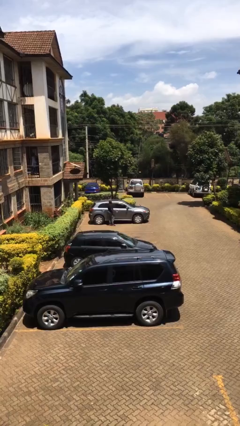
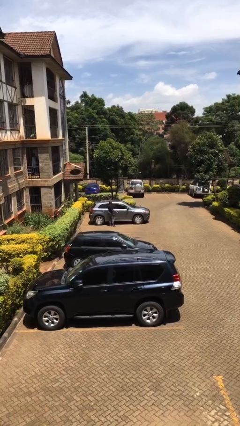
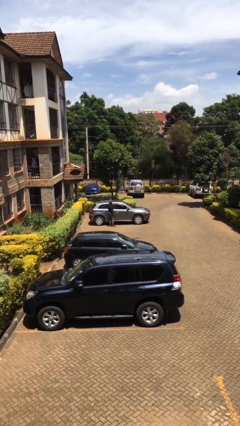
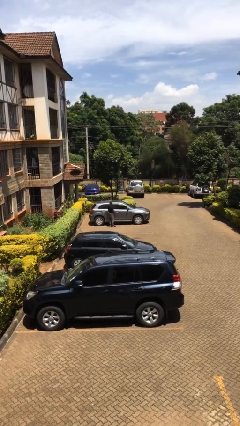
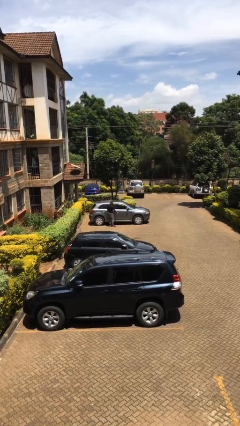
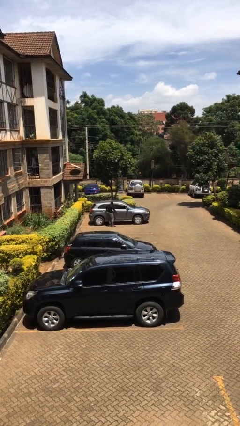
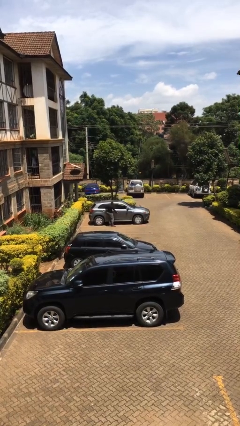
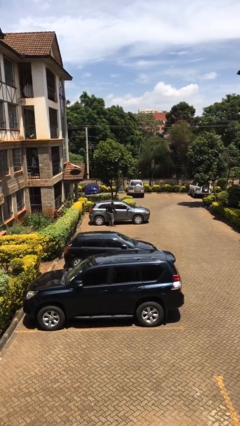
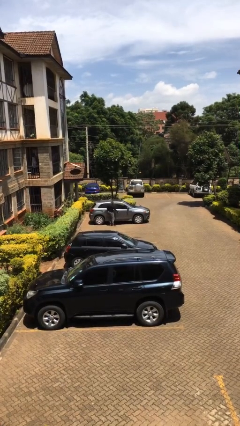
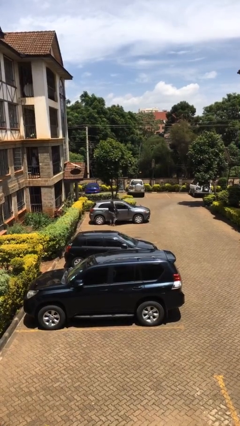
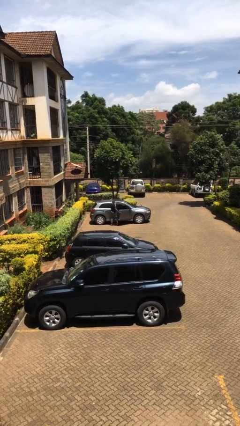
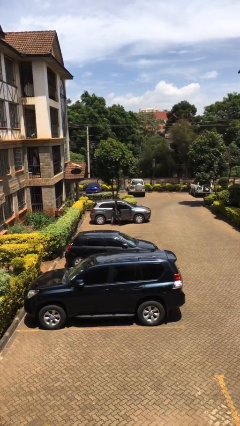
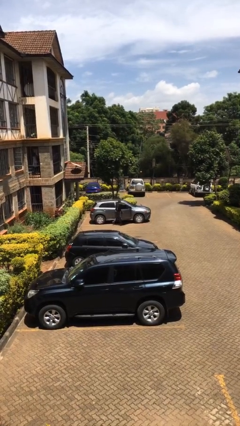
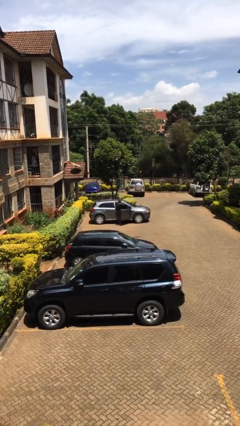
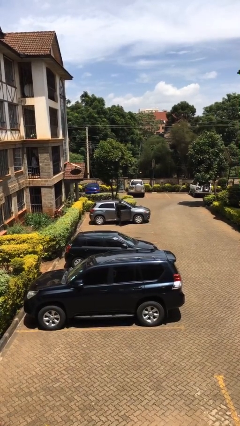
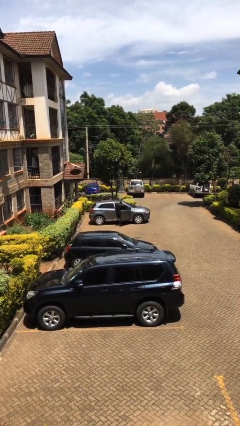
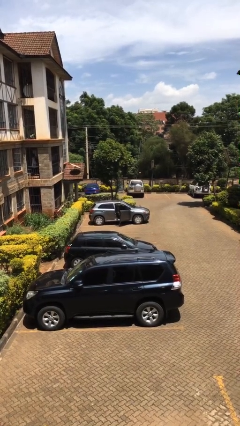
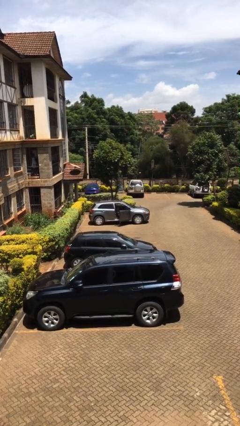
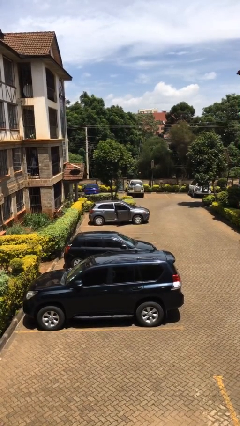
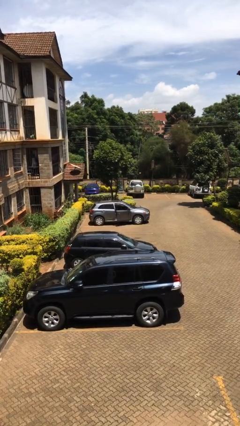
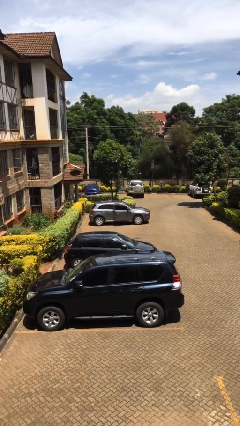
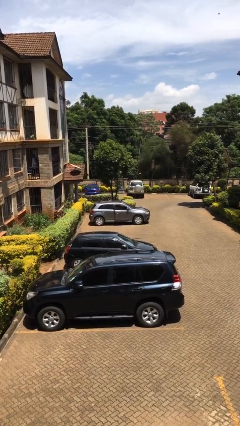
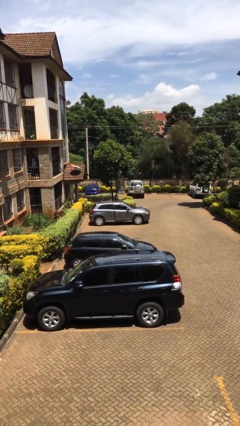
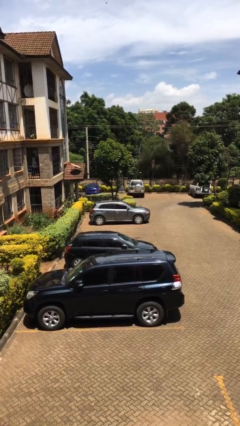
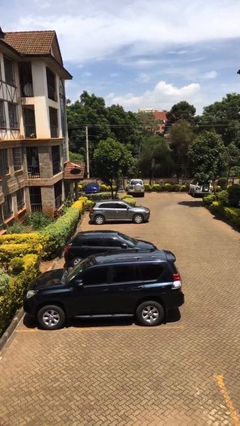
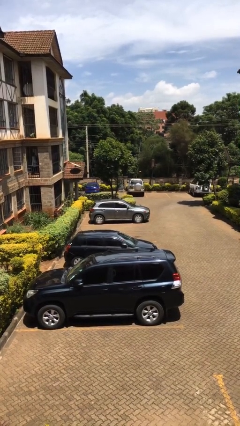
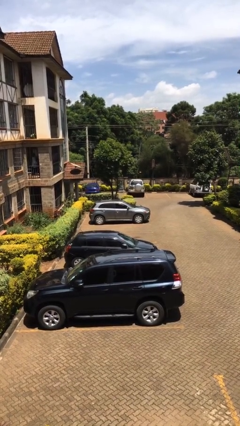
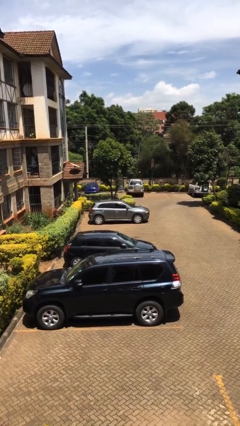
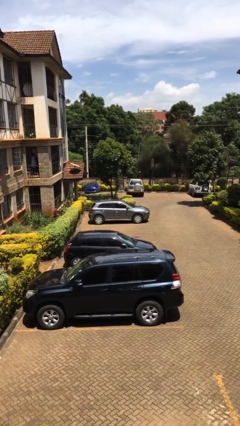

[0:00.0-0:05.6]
car picks up person

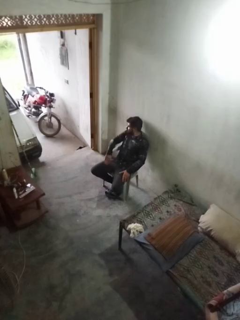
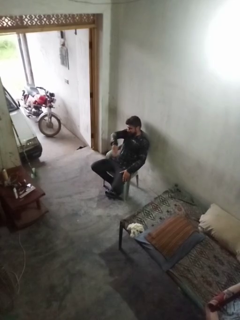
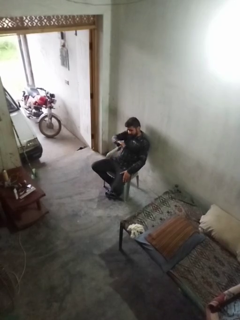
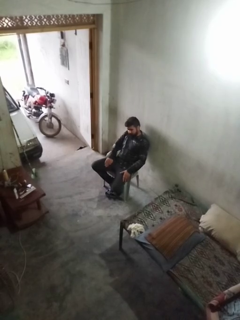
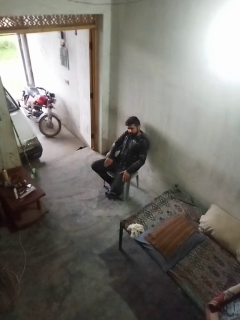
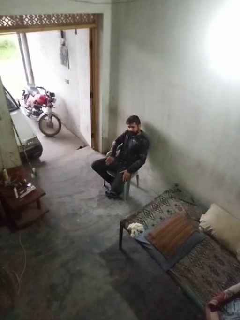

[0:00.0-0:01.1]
person slaps hands on thighs

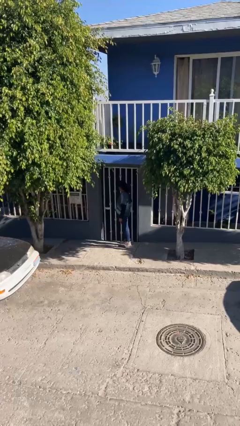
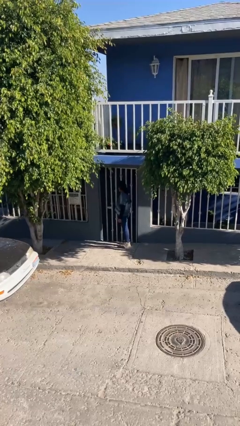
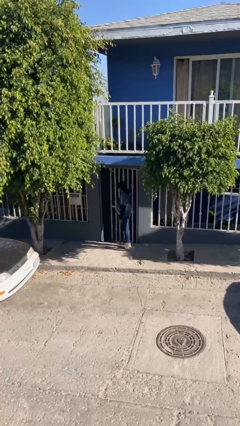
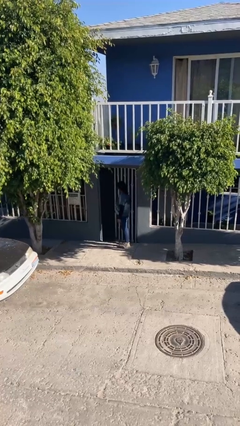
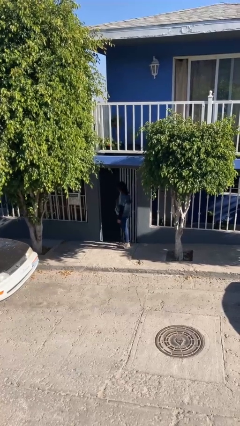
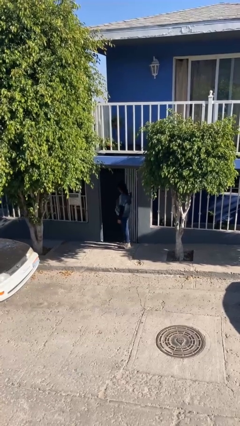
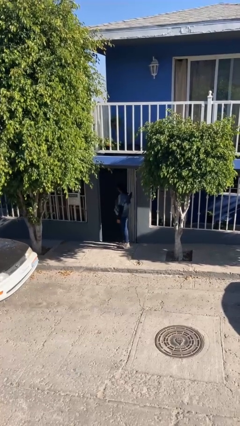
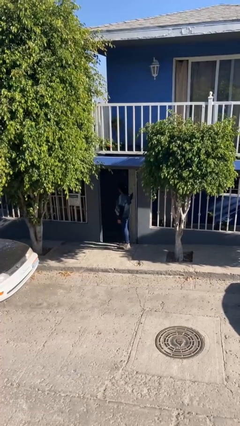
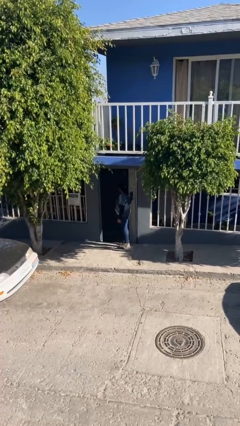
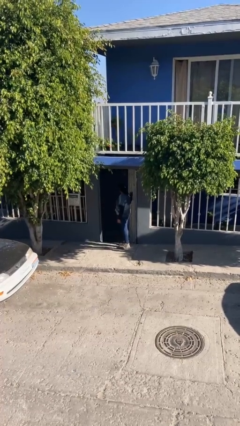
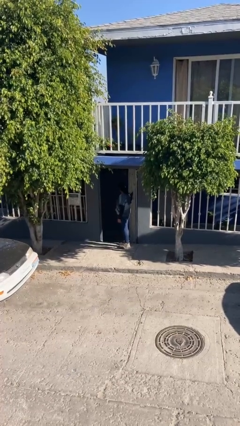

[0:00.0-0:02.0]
person opens facility door

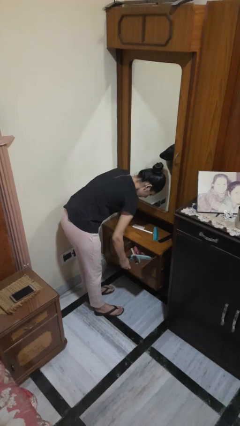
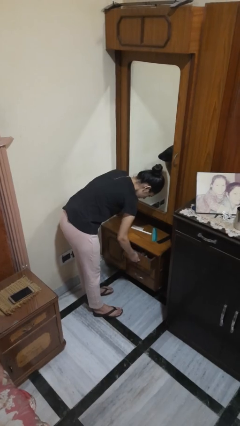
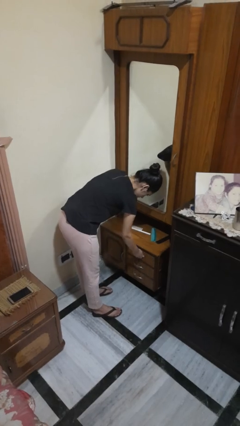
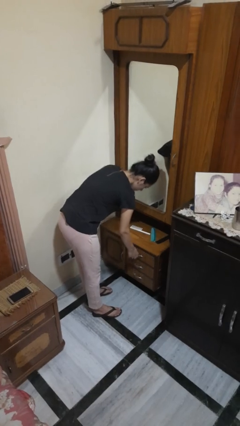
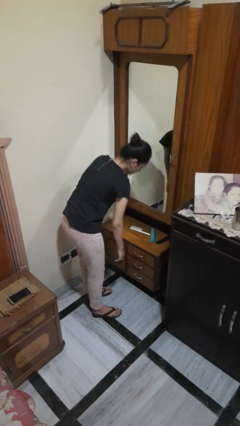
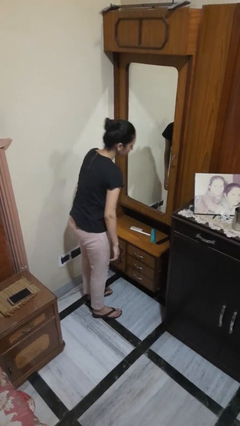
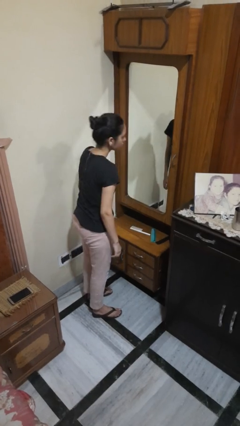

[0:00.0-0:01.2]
person closes dresser drawer

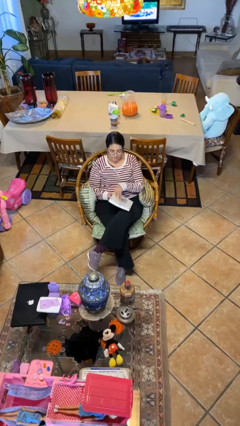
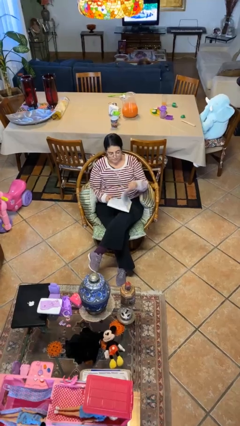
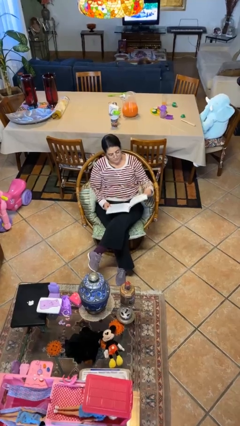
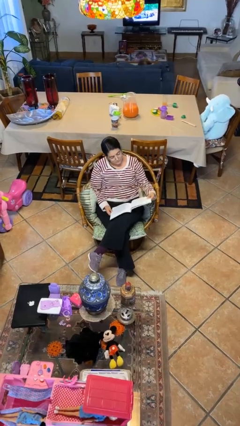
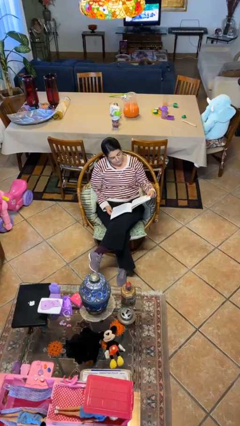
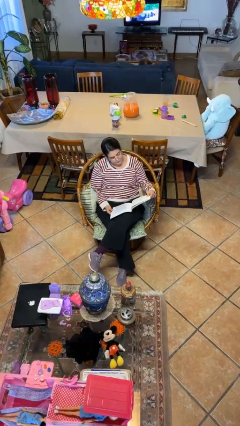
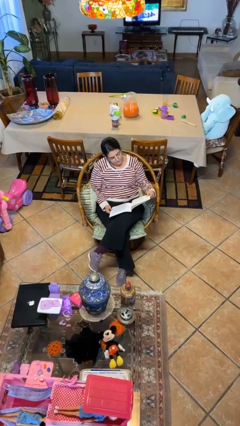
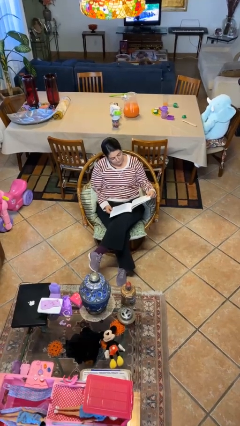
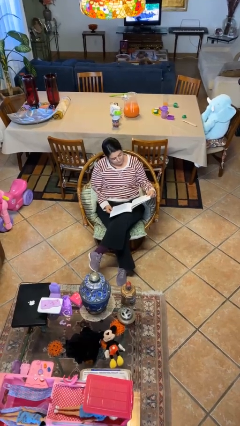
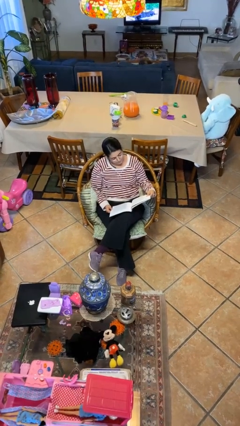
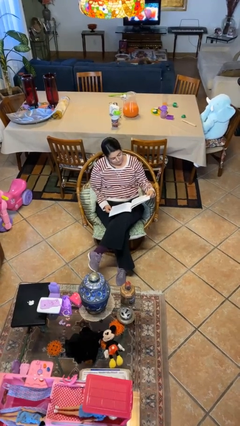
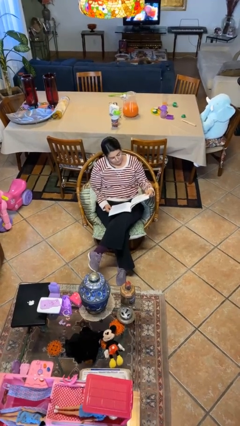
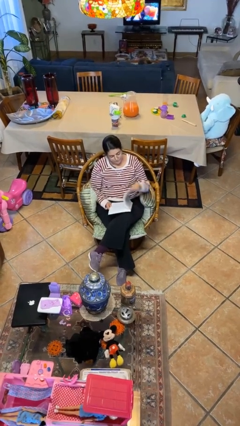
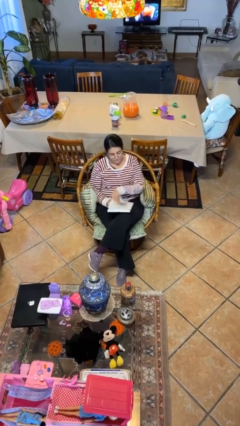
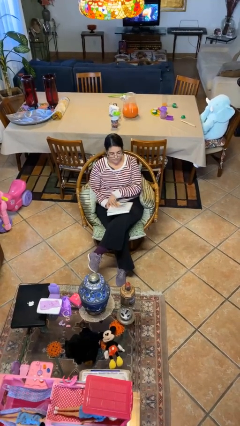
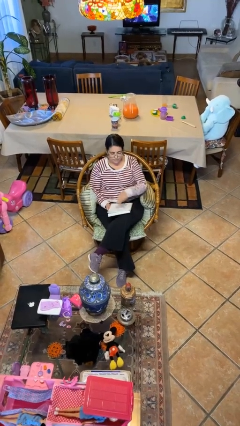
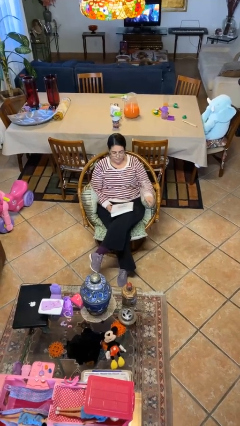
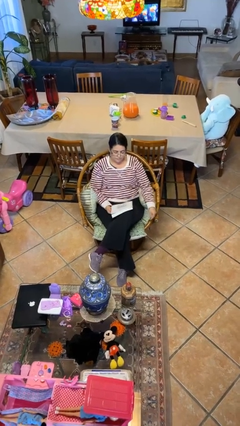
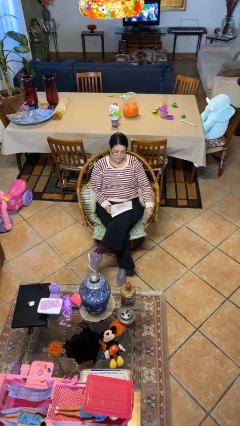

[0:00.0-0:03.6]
person reads document

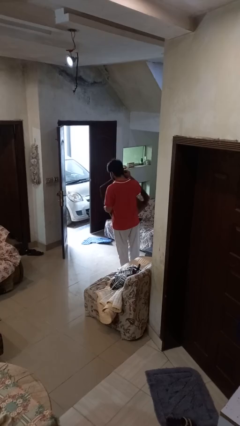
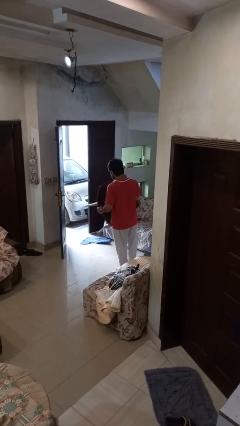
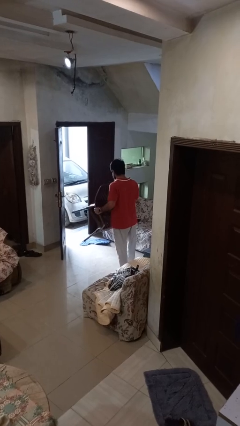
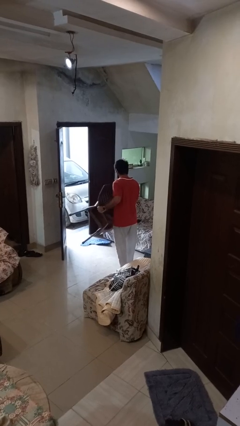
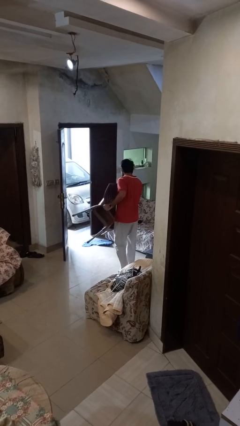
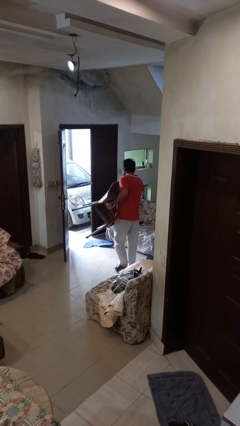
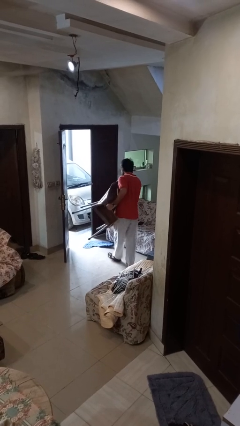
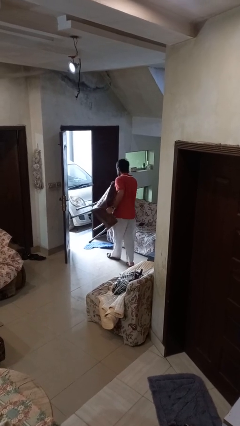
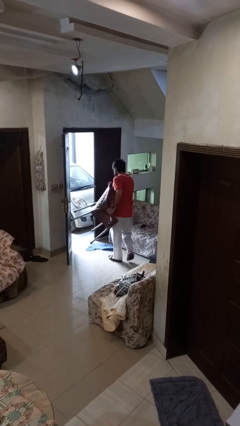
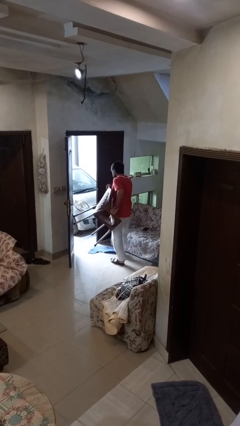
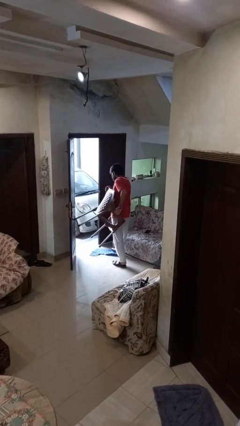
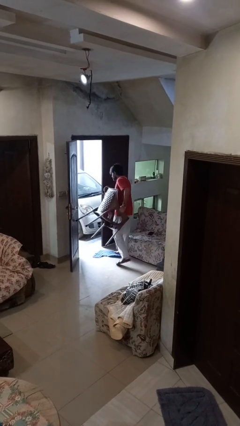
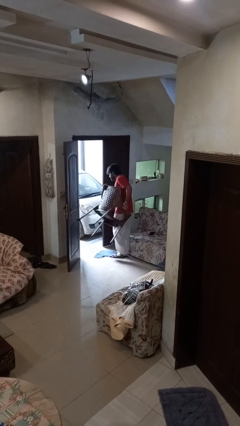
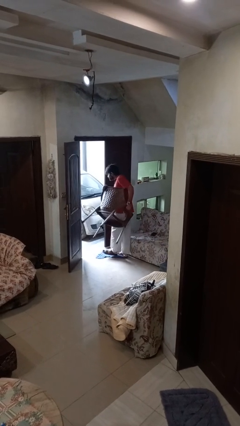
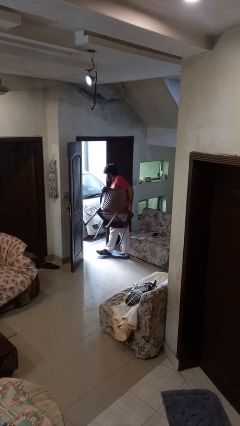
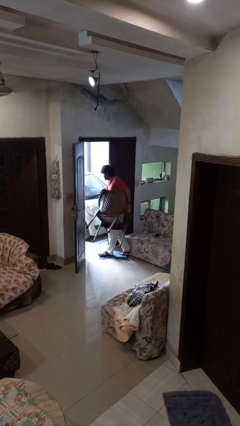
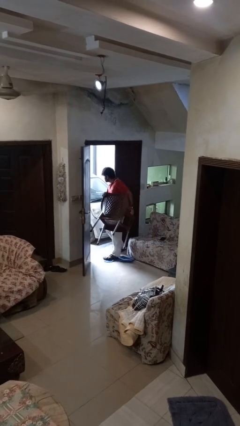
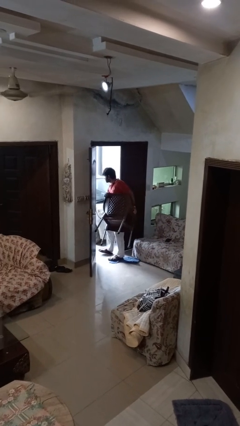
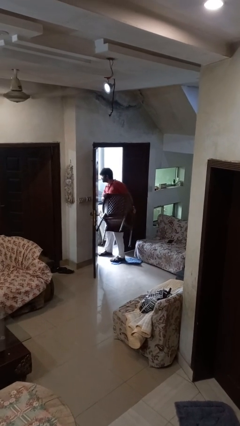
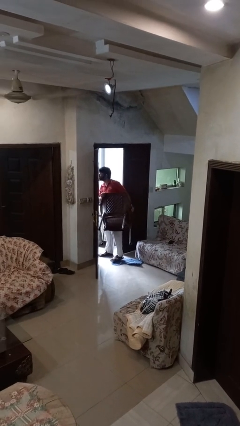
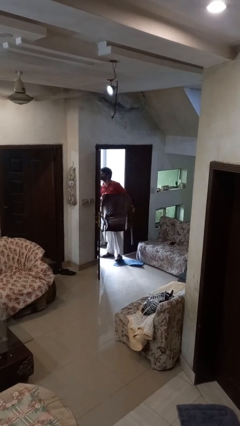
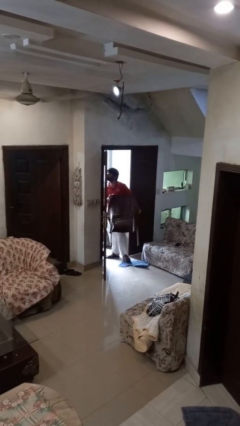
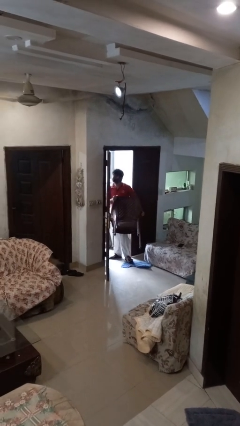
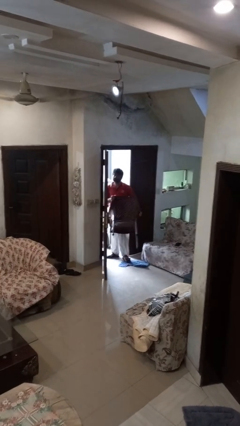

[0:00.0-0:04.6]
person carries furniture
